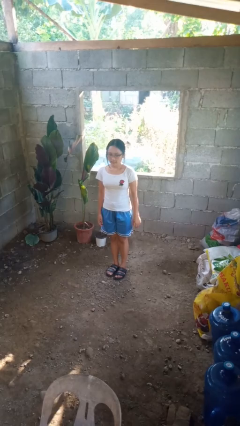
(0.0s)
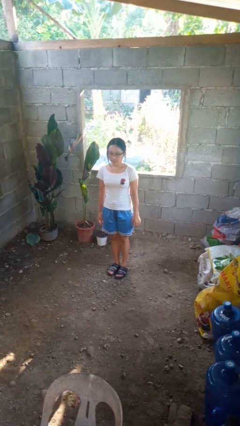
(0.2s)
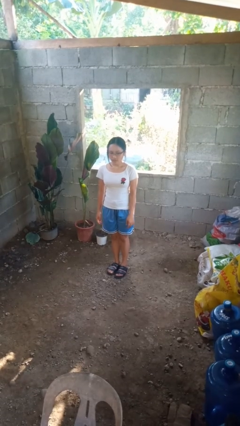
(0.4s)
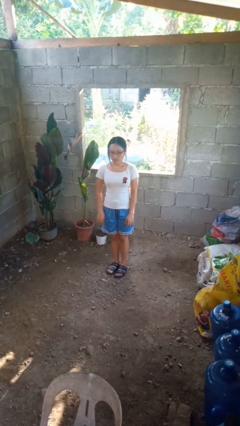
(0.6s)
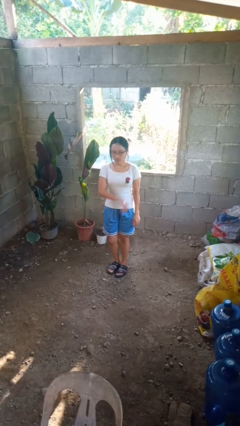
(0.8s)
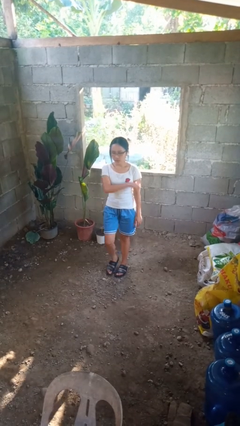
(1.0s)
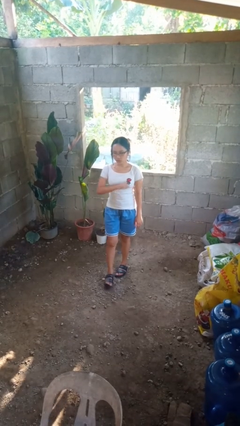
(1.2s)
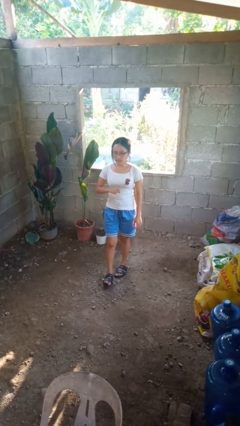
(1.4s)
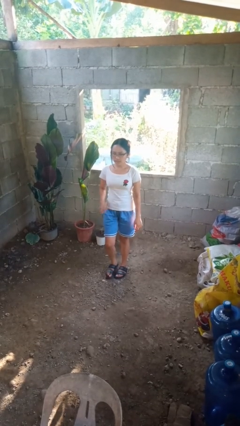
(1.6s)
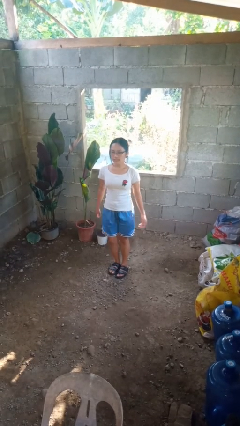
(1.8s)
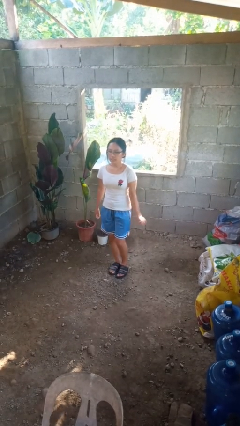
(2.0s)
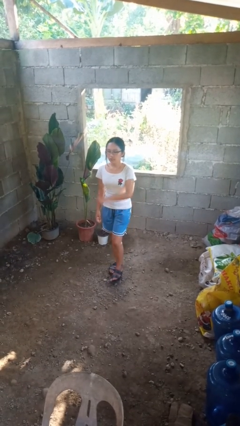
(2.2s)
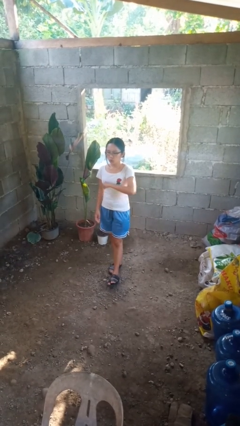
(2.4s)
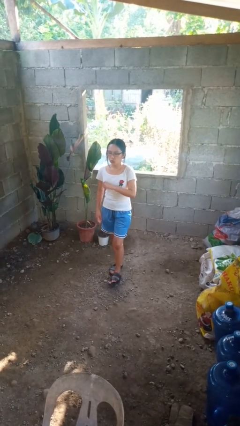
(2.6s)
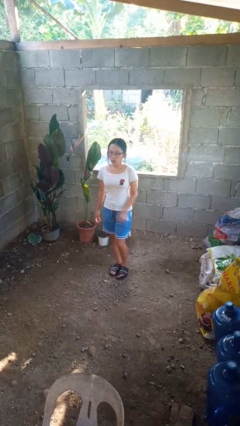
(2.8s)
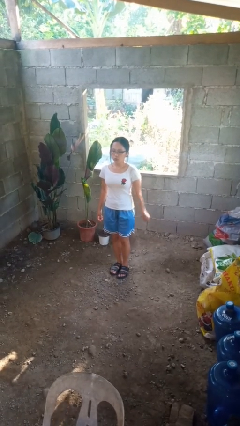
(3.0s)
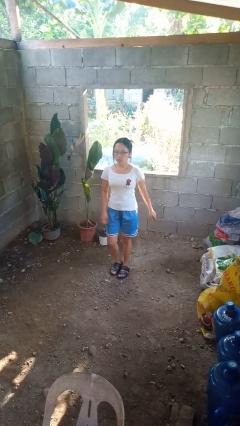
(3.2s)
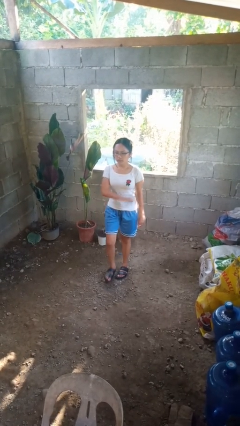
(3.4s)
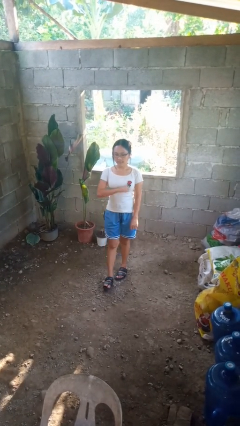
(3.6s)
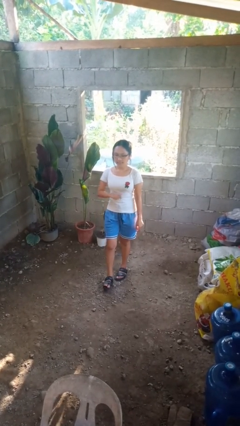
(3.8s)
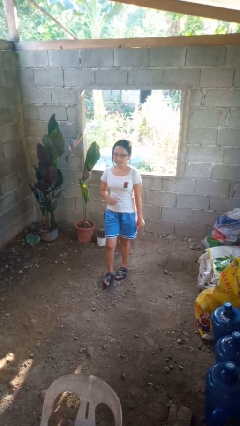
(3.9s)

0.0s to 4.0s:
person dances in place

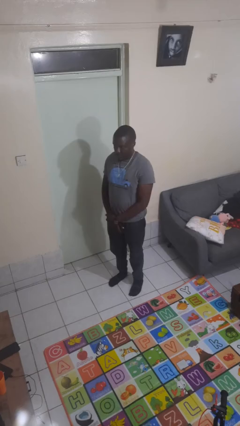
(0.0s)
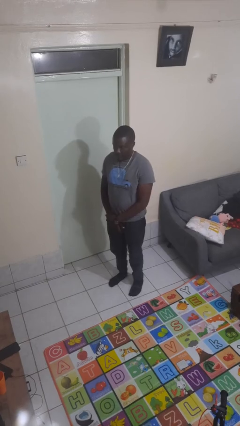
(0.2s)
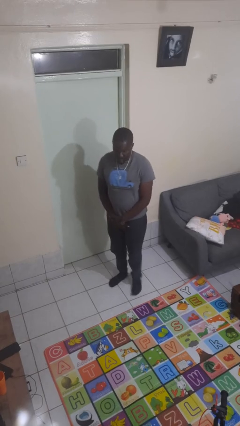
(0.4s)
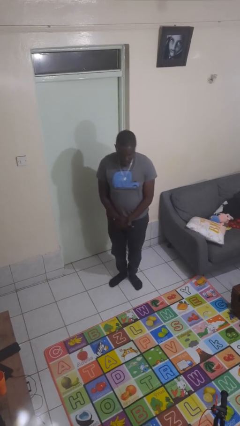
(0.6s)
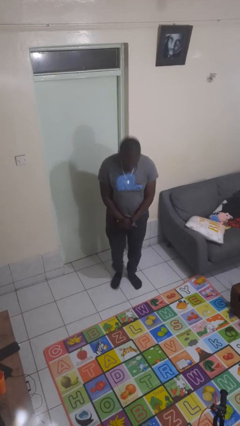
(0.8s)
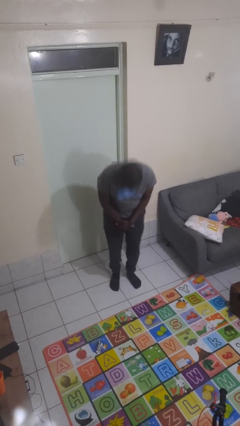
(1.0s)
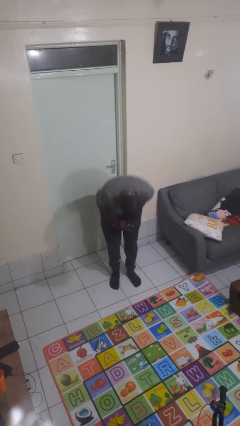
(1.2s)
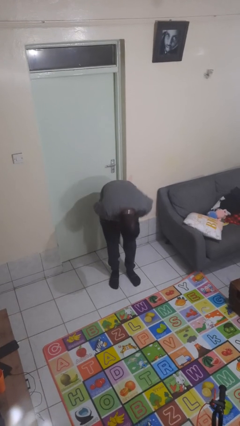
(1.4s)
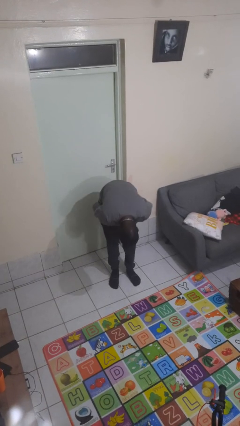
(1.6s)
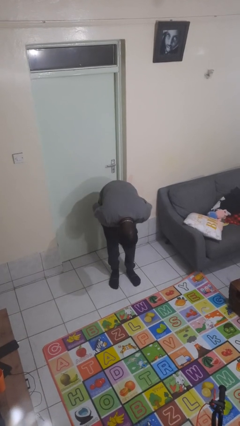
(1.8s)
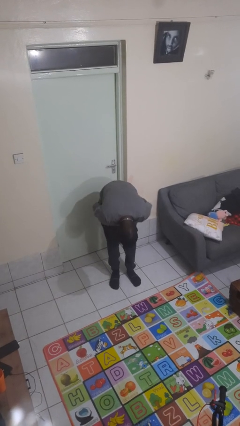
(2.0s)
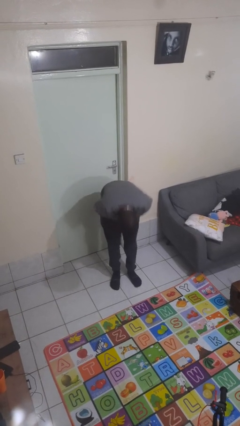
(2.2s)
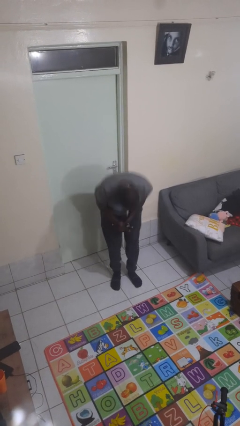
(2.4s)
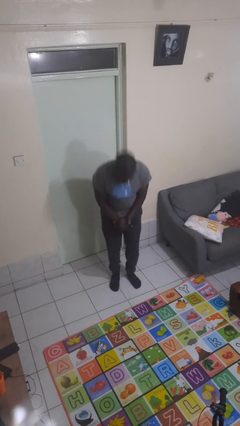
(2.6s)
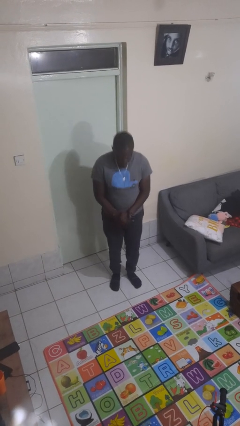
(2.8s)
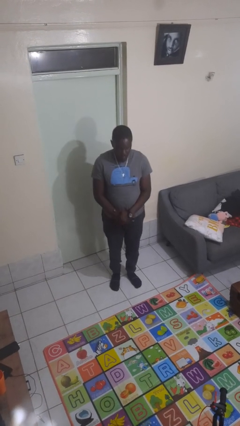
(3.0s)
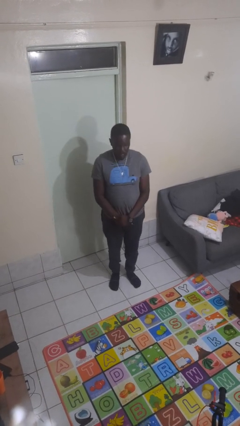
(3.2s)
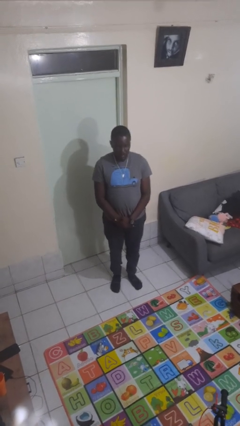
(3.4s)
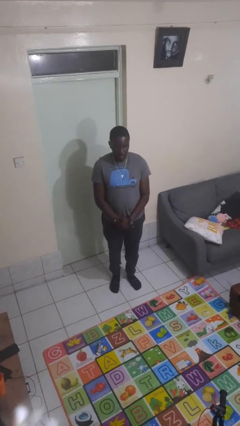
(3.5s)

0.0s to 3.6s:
person bows

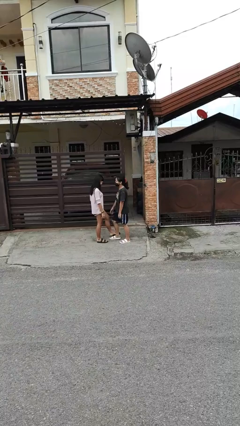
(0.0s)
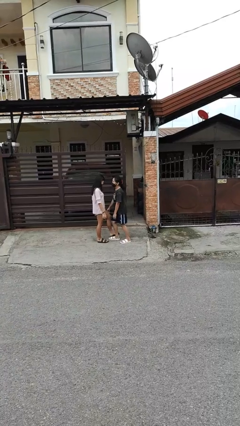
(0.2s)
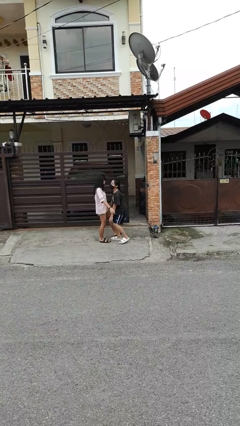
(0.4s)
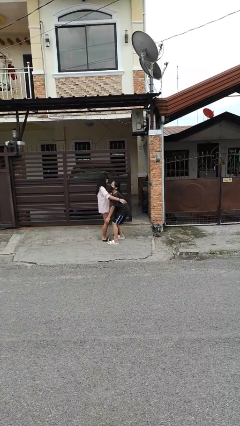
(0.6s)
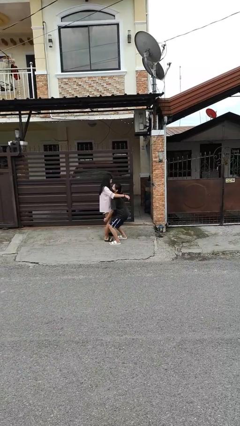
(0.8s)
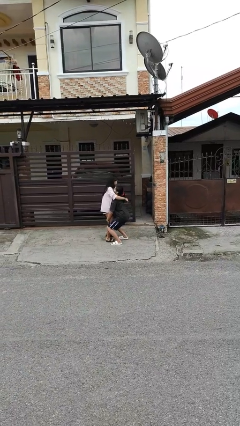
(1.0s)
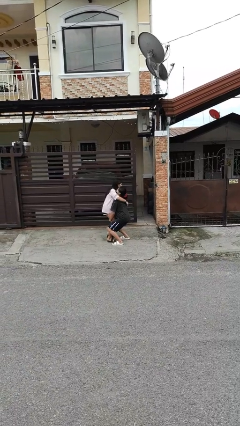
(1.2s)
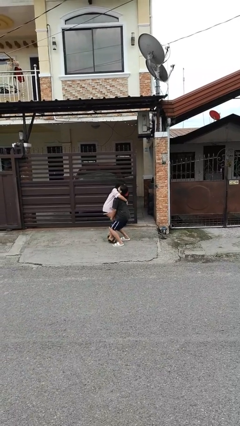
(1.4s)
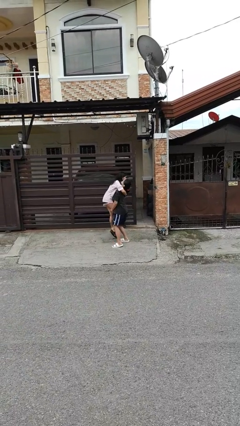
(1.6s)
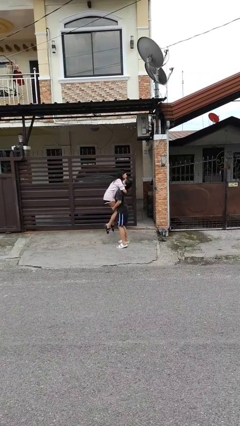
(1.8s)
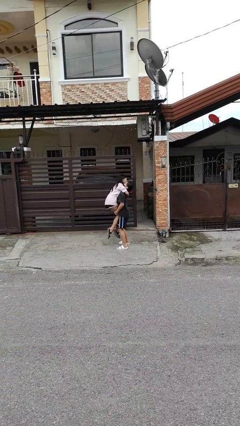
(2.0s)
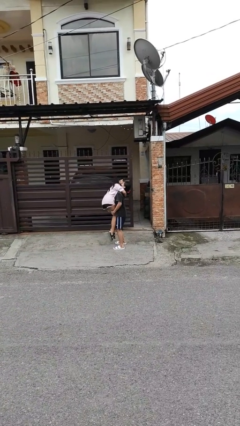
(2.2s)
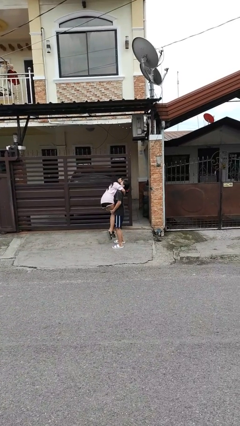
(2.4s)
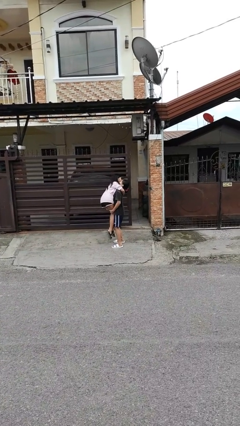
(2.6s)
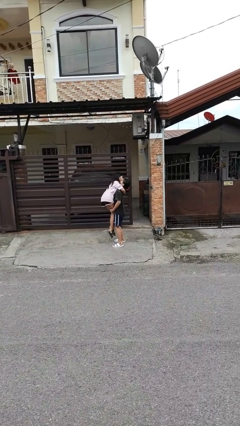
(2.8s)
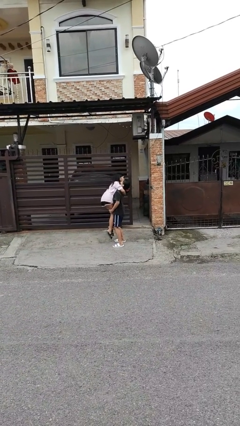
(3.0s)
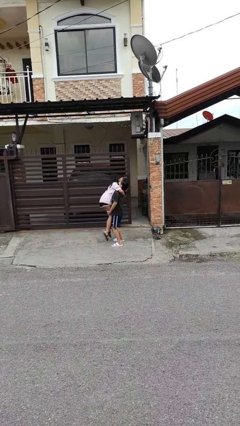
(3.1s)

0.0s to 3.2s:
person picks up person

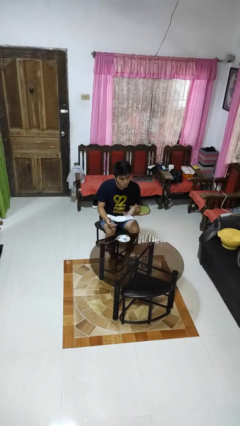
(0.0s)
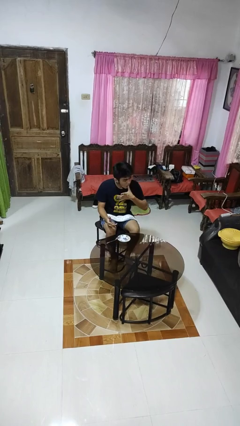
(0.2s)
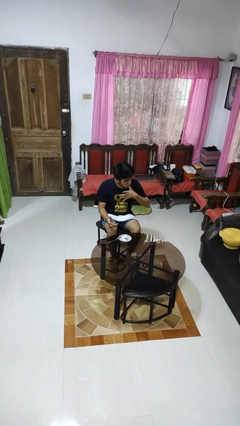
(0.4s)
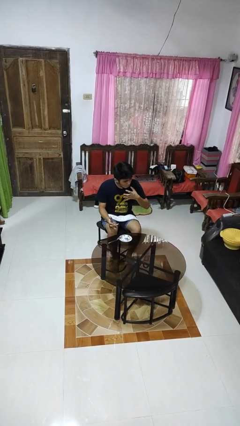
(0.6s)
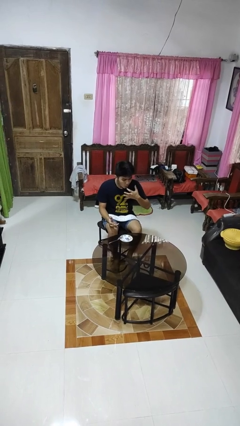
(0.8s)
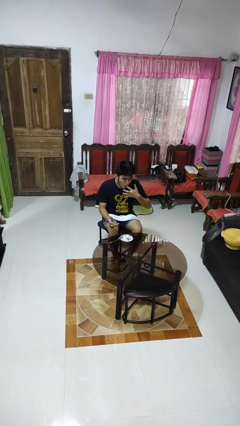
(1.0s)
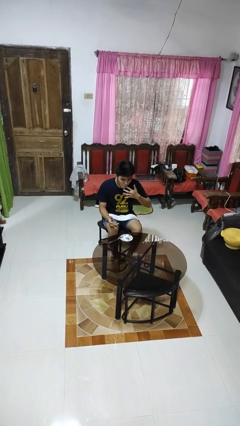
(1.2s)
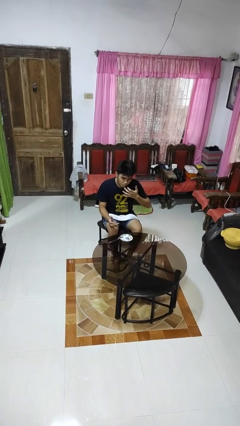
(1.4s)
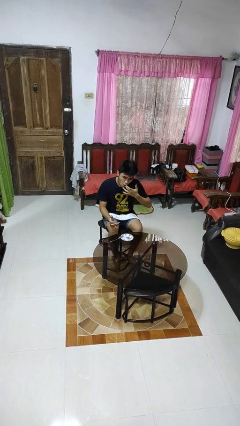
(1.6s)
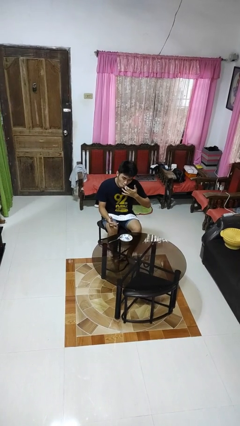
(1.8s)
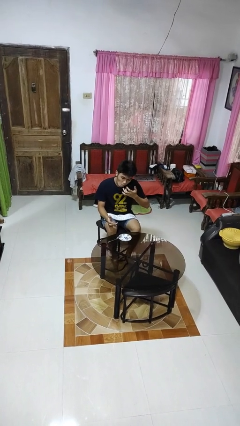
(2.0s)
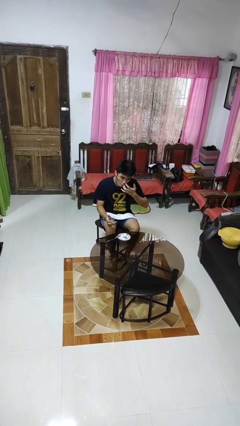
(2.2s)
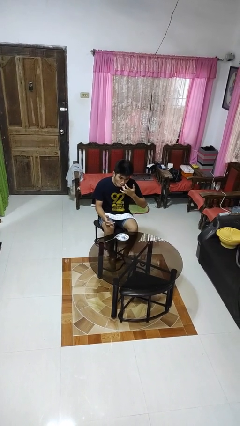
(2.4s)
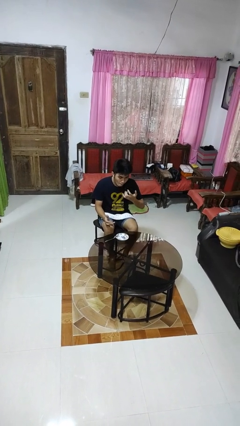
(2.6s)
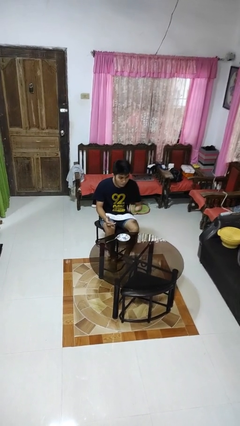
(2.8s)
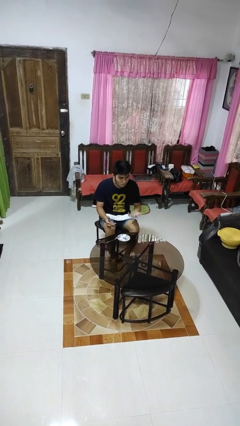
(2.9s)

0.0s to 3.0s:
person licks fingers

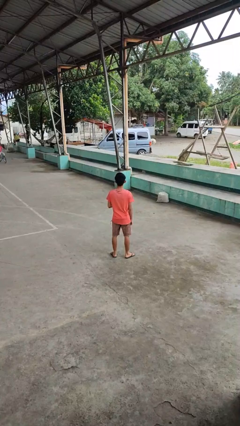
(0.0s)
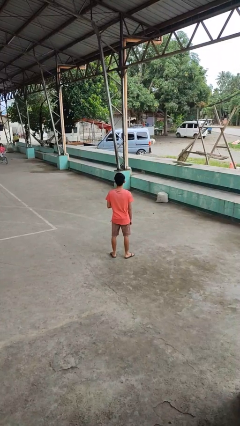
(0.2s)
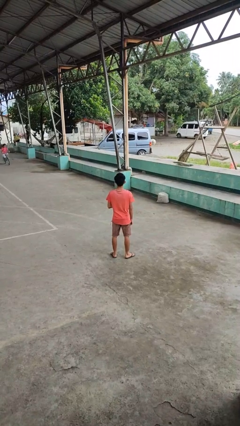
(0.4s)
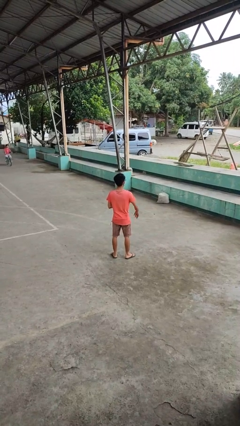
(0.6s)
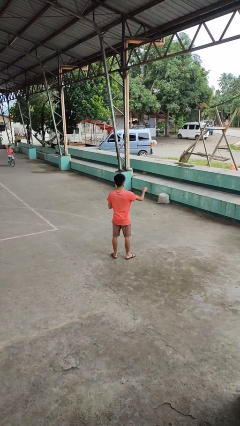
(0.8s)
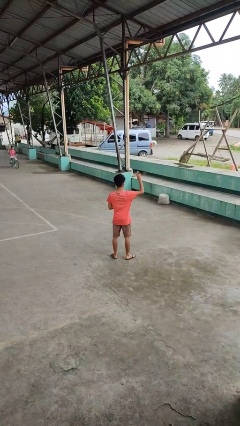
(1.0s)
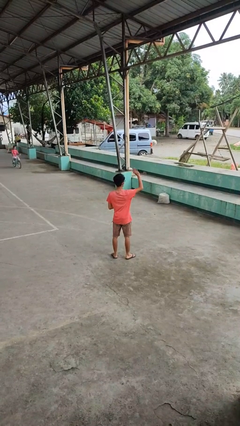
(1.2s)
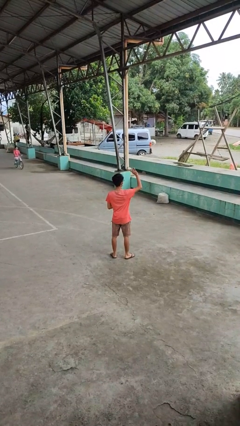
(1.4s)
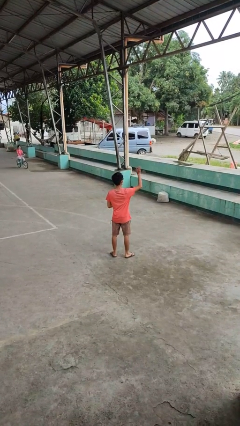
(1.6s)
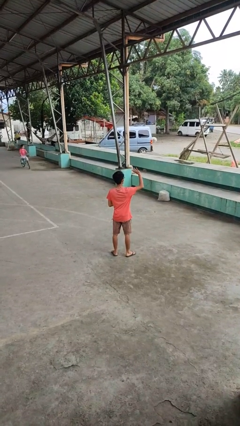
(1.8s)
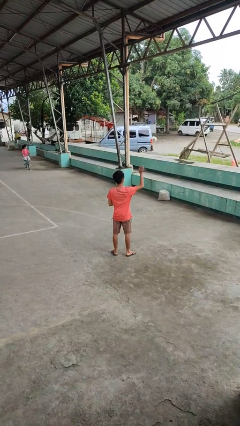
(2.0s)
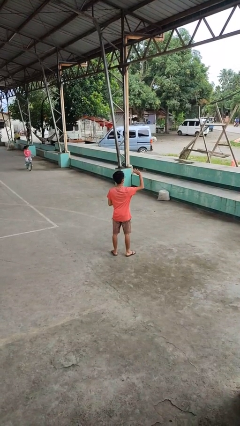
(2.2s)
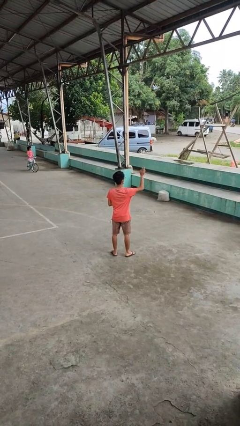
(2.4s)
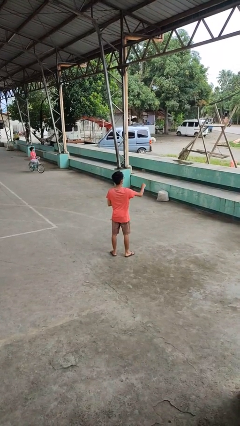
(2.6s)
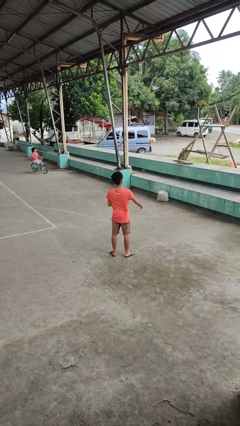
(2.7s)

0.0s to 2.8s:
person waves at person

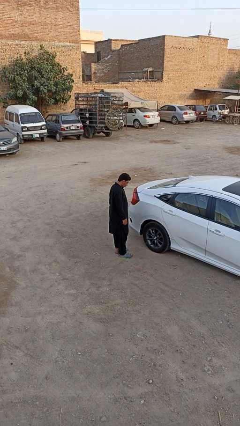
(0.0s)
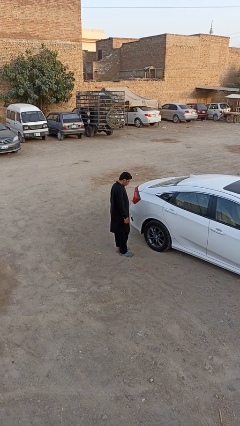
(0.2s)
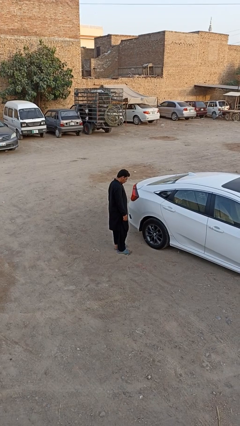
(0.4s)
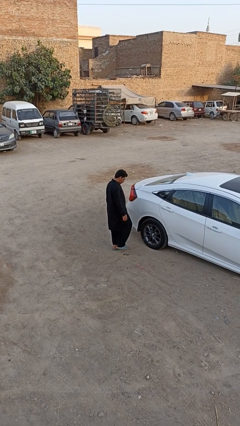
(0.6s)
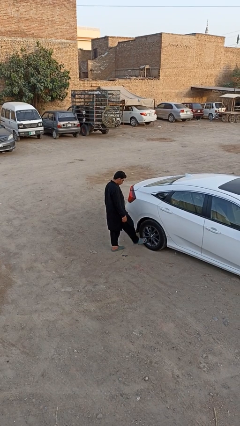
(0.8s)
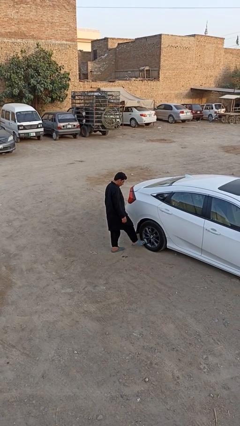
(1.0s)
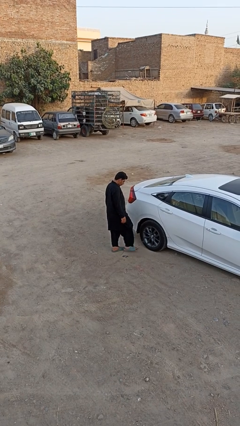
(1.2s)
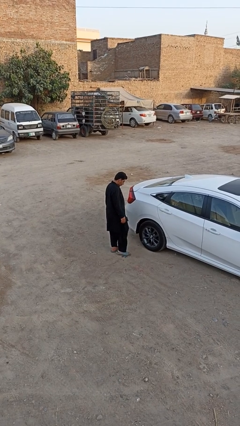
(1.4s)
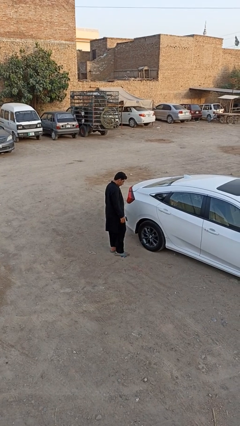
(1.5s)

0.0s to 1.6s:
person kicks car tires
